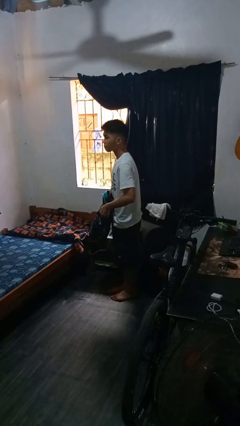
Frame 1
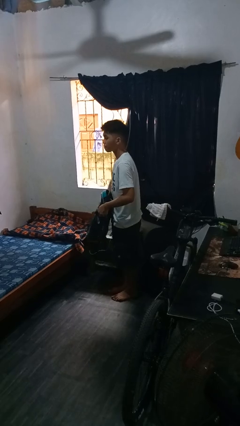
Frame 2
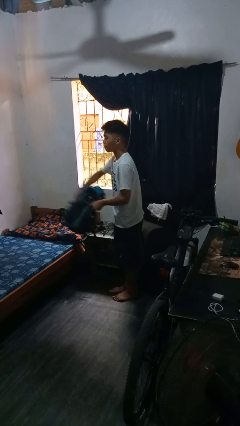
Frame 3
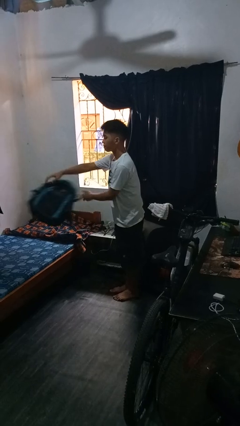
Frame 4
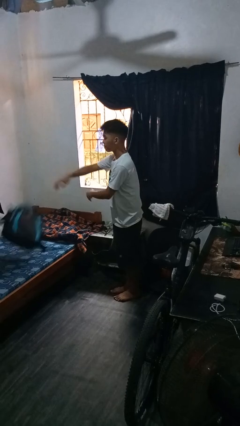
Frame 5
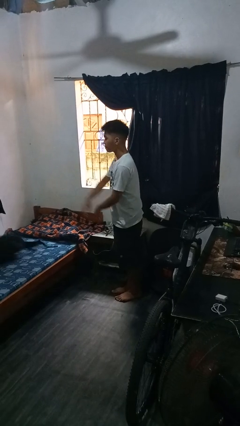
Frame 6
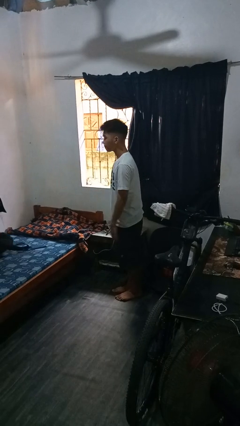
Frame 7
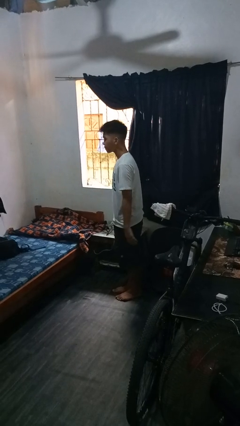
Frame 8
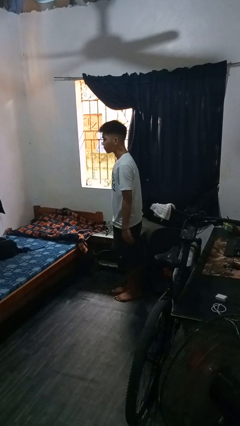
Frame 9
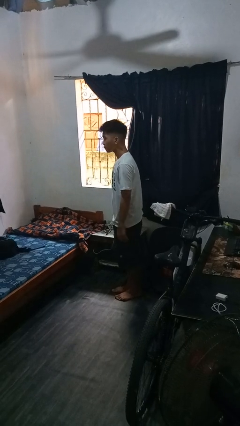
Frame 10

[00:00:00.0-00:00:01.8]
person throws object on bed

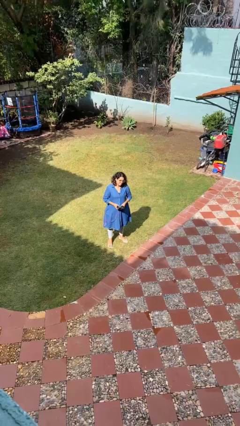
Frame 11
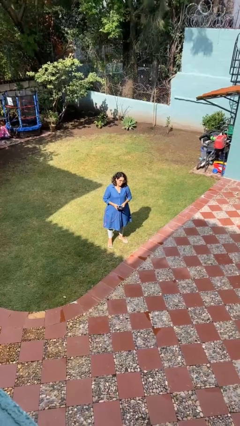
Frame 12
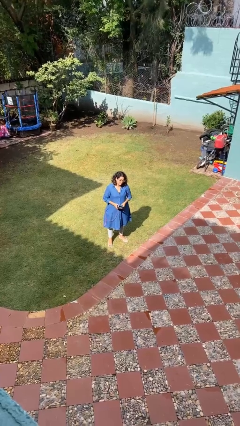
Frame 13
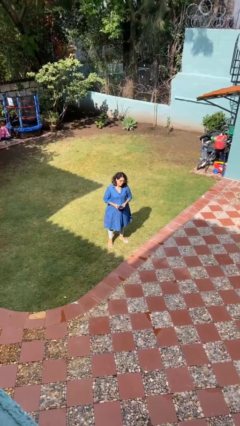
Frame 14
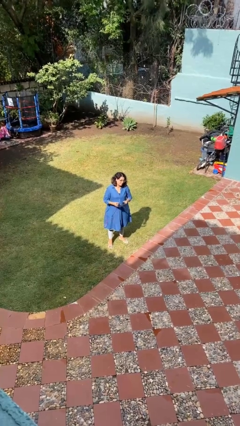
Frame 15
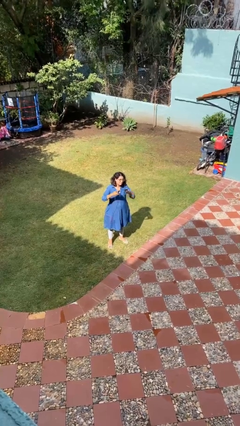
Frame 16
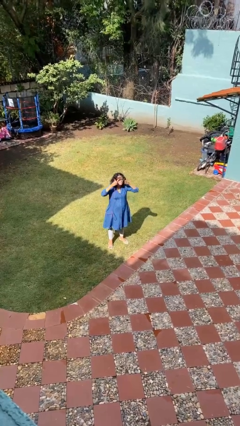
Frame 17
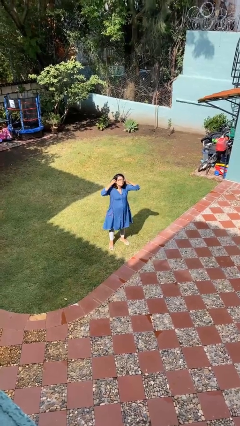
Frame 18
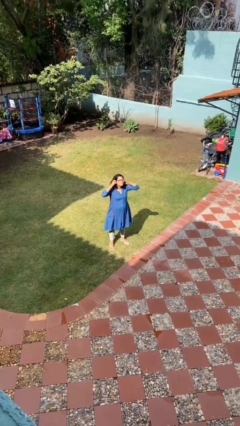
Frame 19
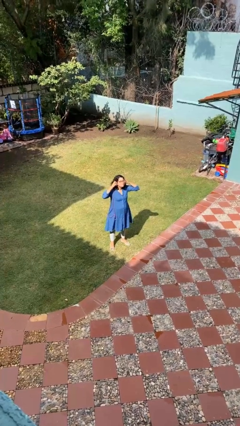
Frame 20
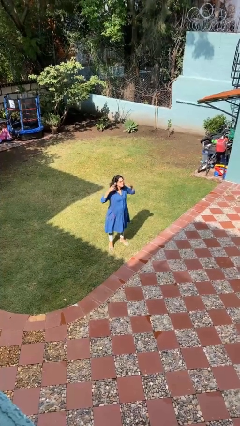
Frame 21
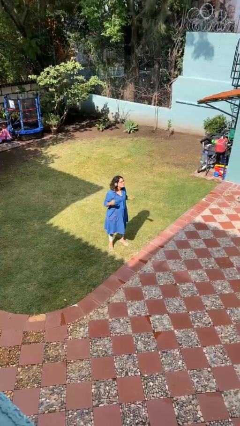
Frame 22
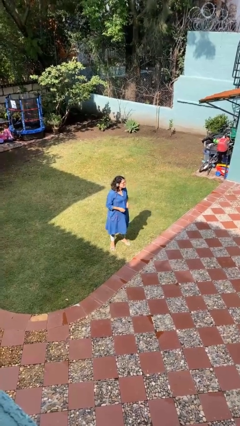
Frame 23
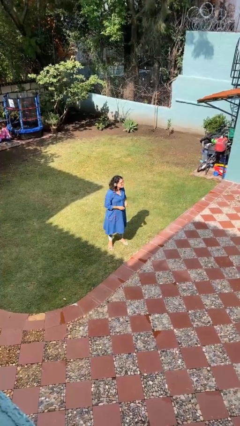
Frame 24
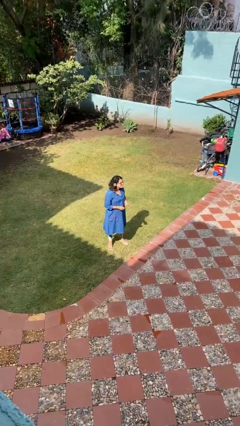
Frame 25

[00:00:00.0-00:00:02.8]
person puts on headphones

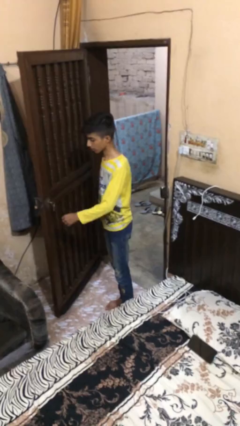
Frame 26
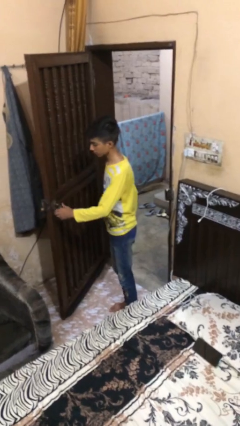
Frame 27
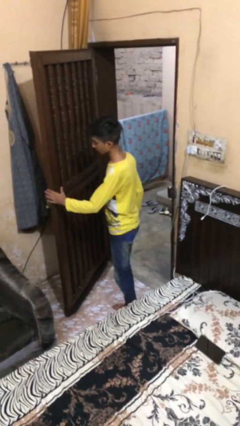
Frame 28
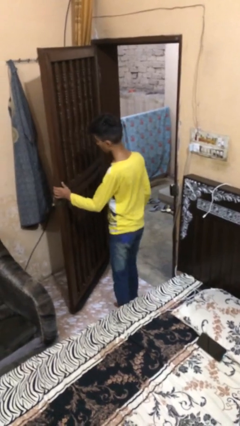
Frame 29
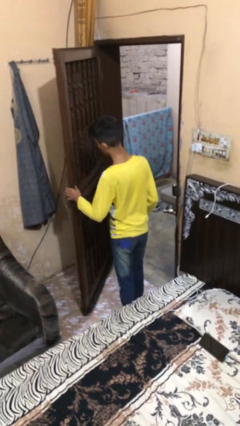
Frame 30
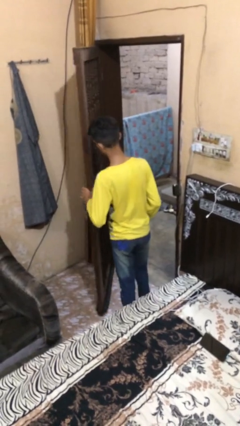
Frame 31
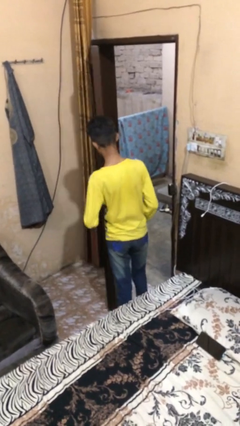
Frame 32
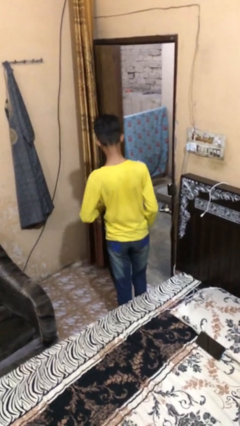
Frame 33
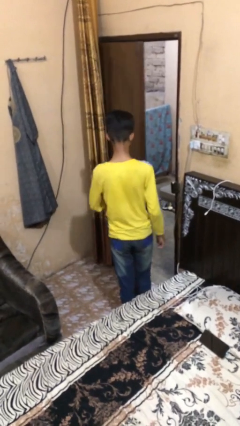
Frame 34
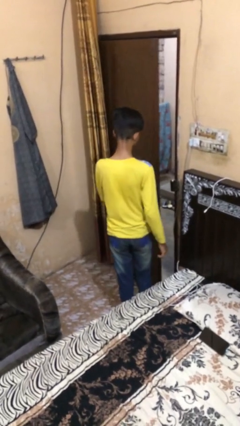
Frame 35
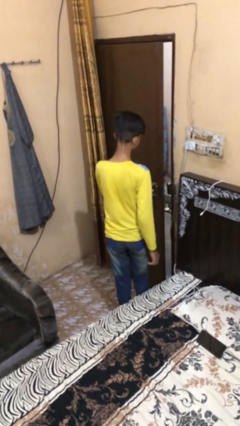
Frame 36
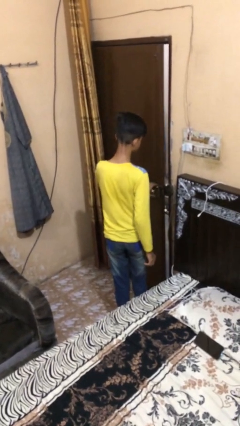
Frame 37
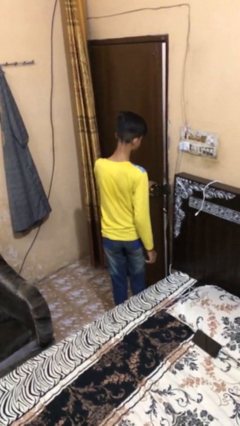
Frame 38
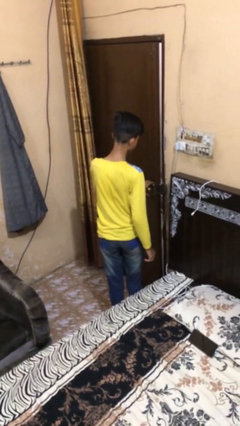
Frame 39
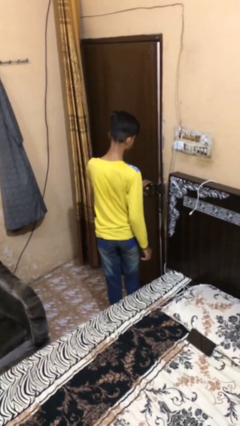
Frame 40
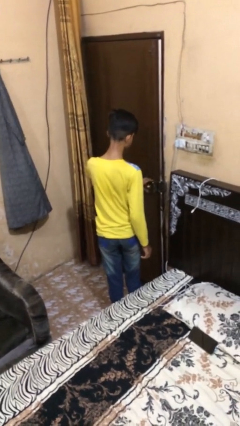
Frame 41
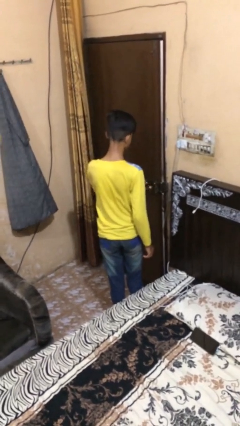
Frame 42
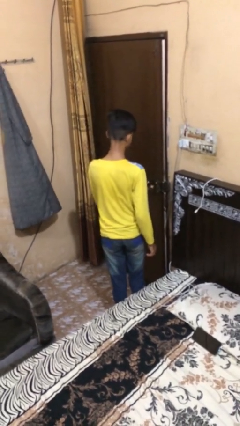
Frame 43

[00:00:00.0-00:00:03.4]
person closes facility door

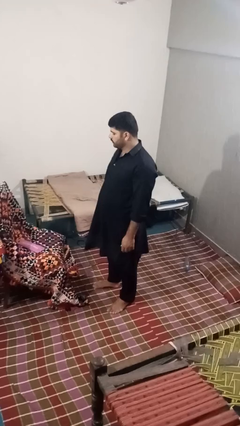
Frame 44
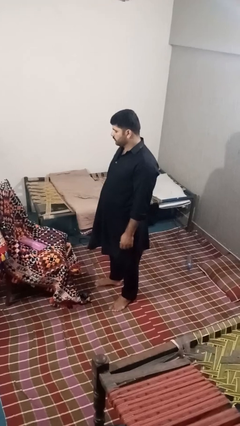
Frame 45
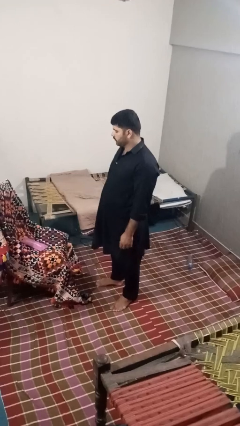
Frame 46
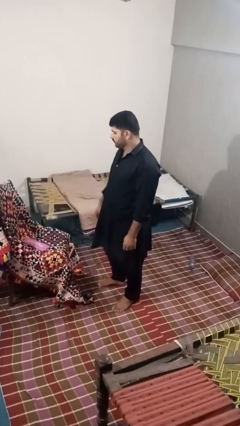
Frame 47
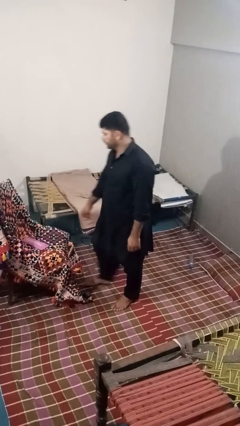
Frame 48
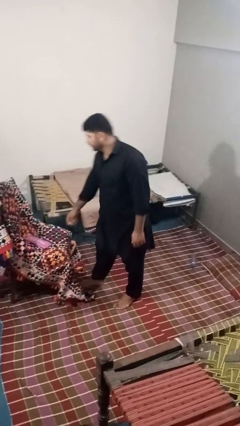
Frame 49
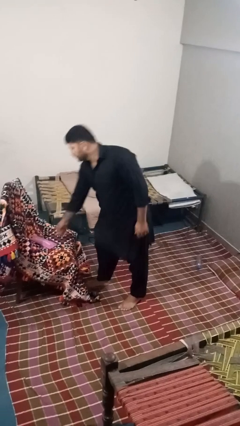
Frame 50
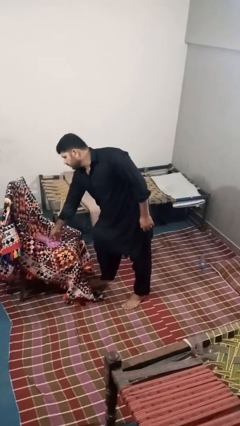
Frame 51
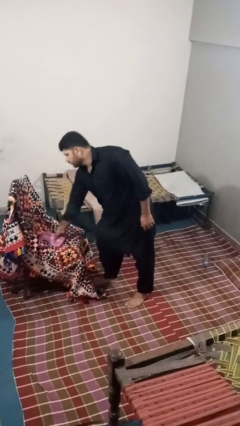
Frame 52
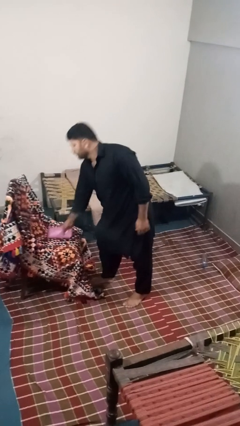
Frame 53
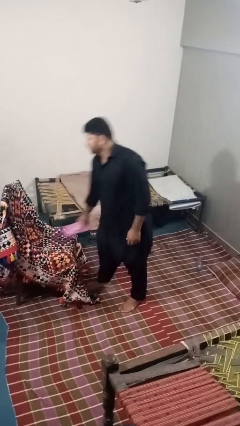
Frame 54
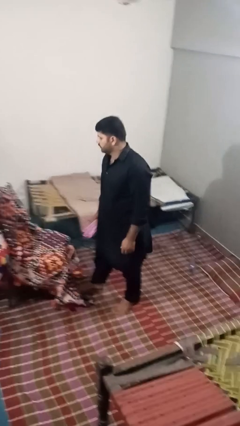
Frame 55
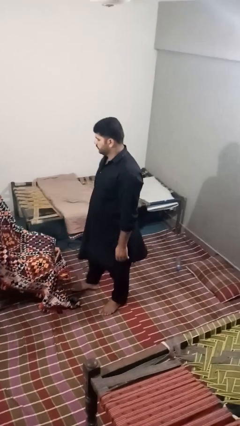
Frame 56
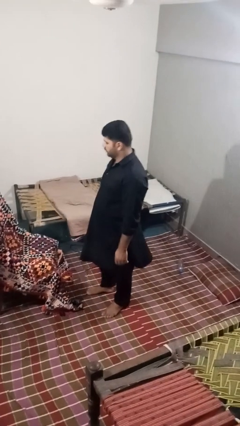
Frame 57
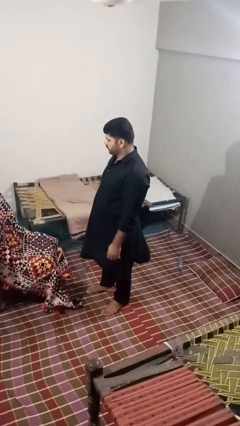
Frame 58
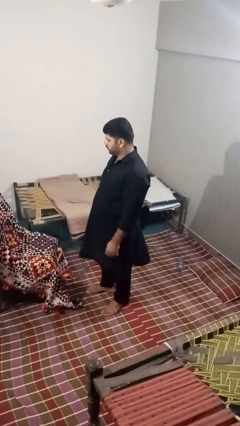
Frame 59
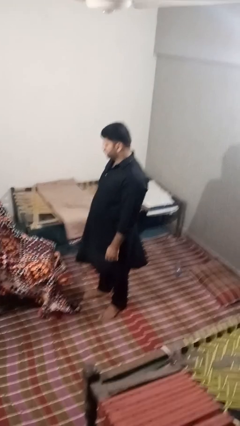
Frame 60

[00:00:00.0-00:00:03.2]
person picks up object from couch

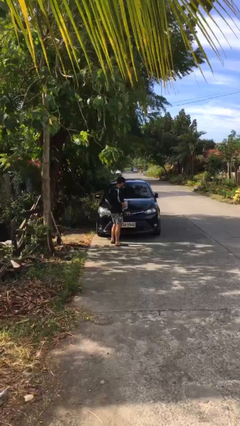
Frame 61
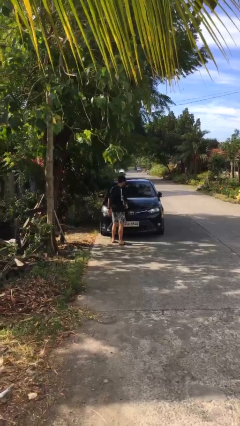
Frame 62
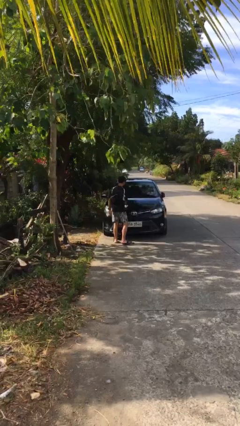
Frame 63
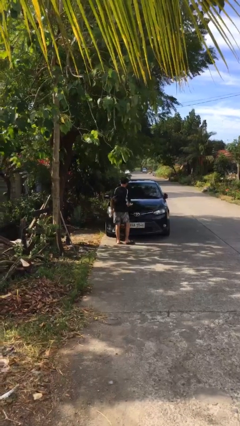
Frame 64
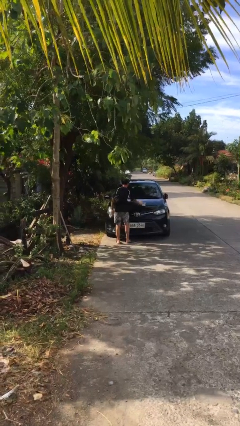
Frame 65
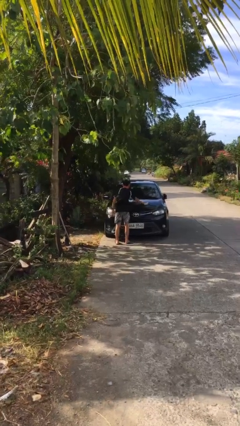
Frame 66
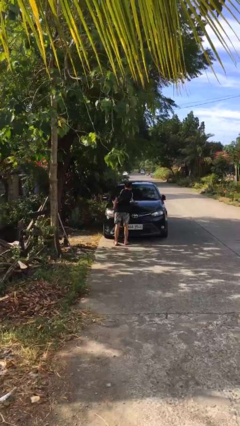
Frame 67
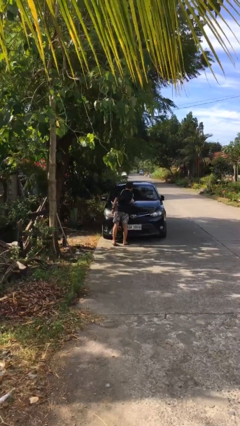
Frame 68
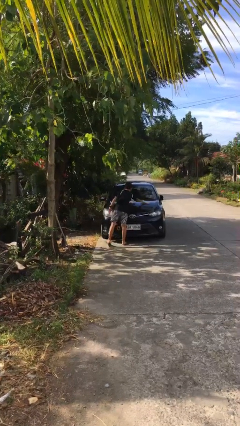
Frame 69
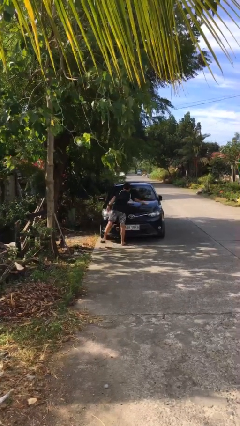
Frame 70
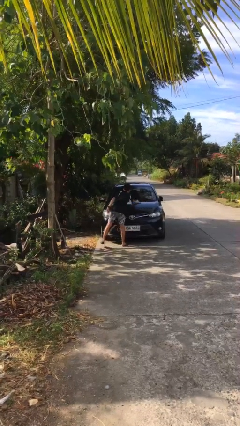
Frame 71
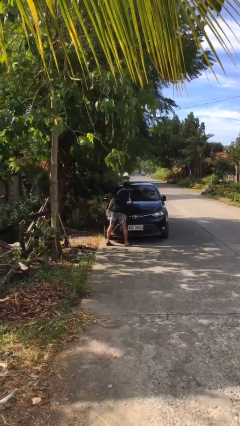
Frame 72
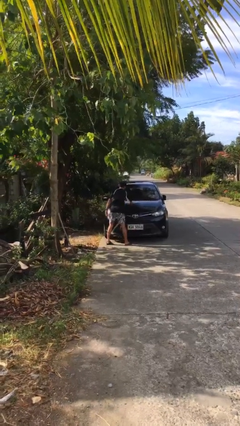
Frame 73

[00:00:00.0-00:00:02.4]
person polishes car with rag

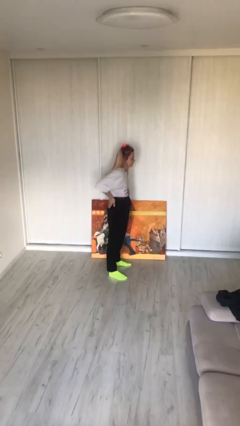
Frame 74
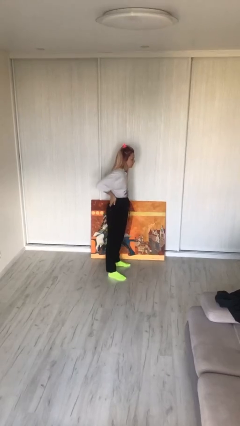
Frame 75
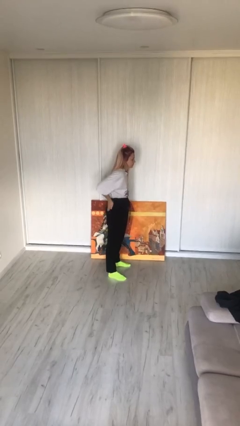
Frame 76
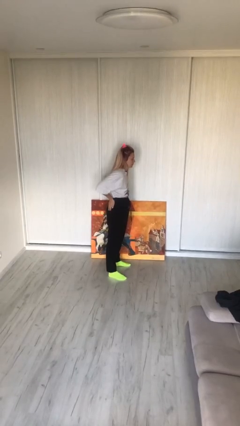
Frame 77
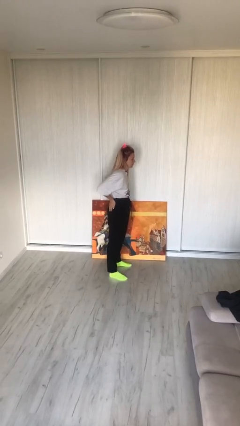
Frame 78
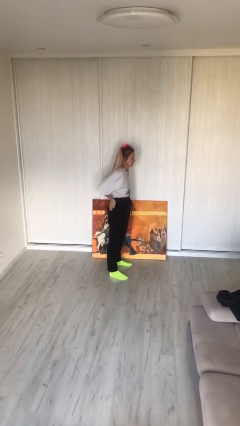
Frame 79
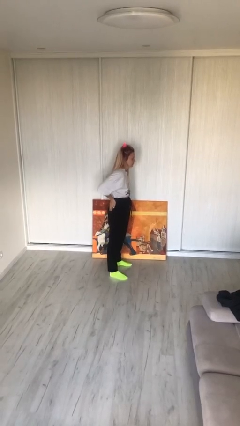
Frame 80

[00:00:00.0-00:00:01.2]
person puts hands in back pockets

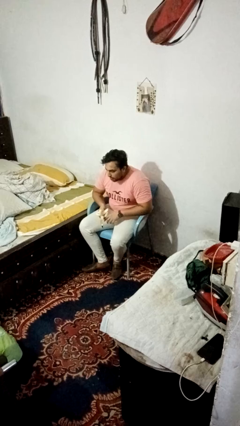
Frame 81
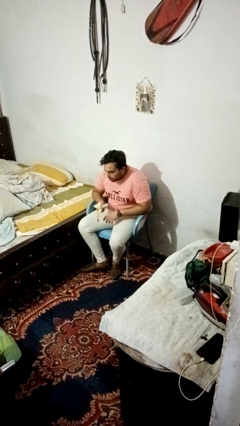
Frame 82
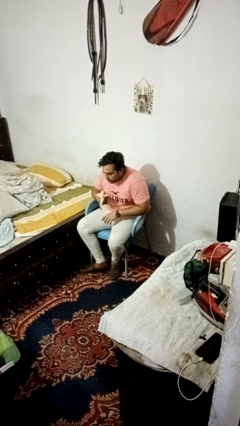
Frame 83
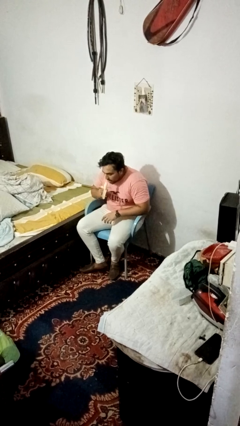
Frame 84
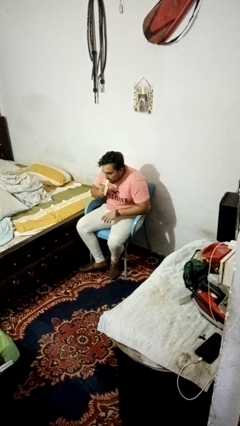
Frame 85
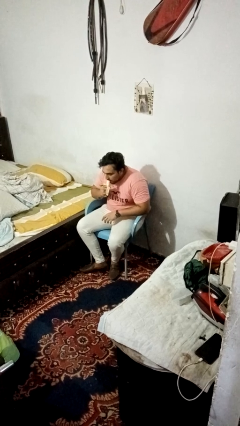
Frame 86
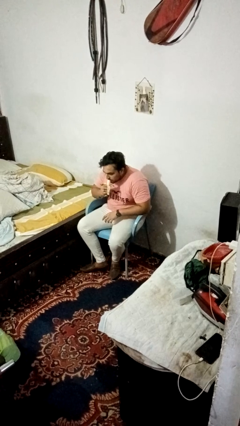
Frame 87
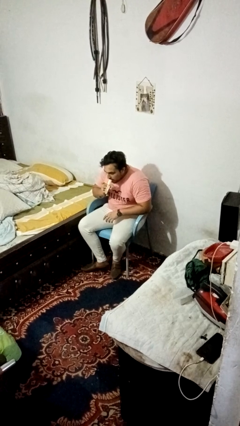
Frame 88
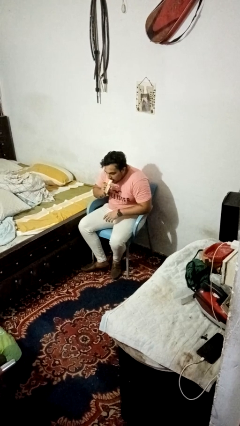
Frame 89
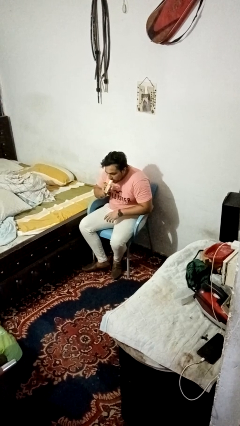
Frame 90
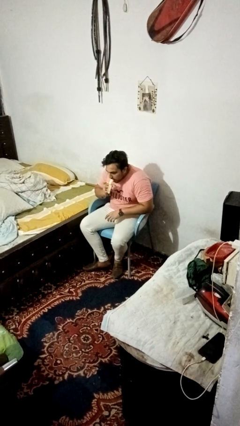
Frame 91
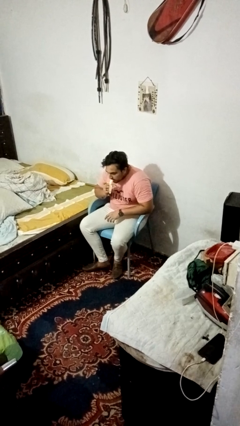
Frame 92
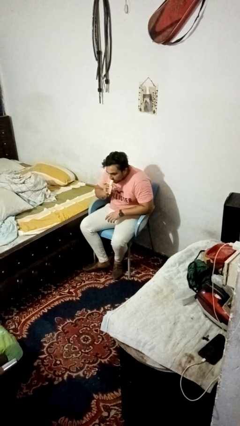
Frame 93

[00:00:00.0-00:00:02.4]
person eats banana
